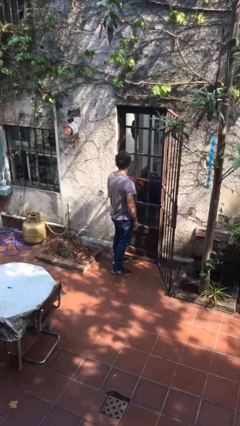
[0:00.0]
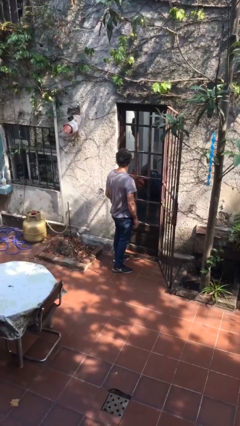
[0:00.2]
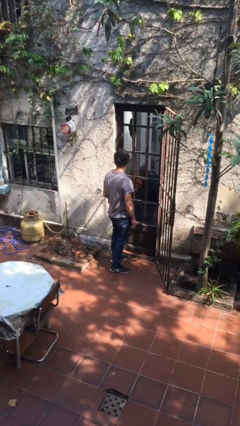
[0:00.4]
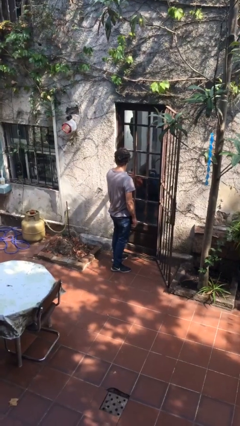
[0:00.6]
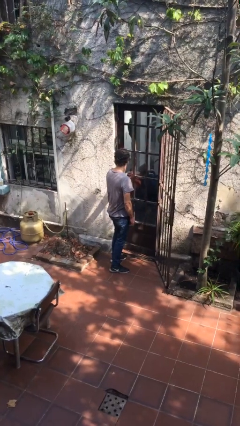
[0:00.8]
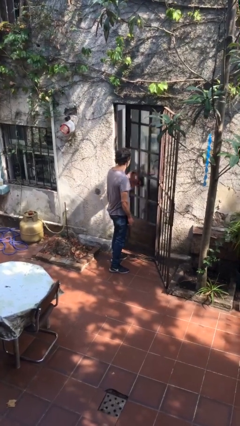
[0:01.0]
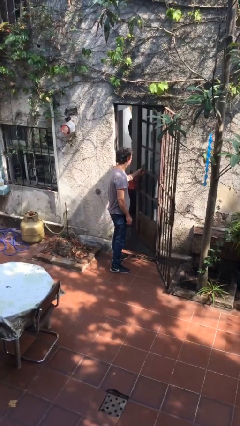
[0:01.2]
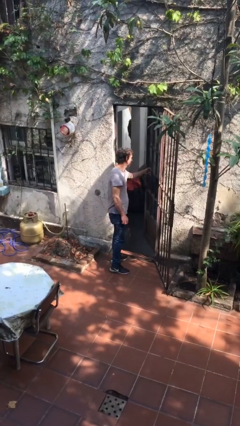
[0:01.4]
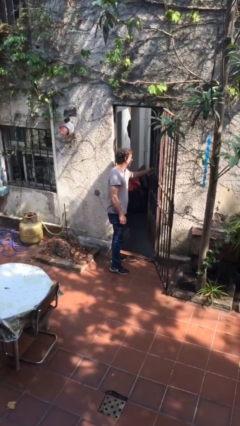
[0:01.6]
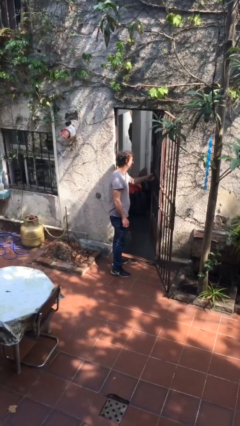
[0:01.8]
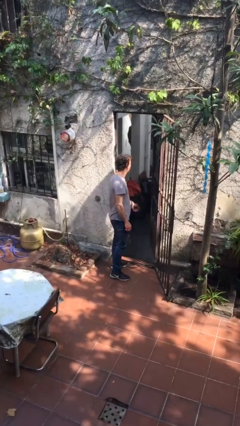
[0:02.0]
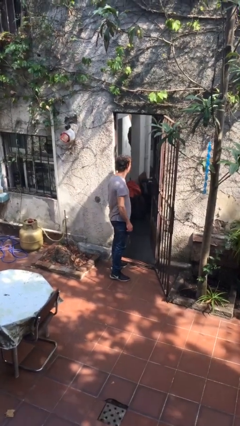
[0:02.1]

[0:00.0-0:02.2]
person opens facility door

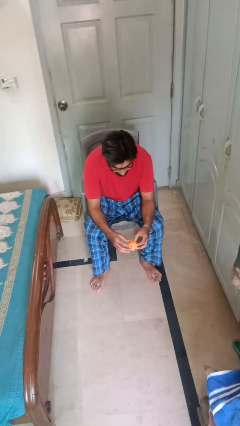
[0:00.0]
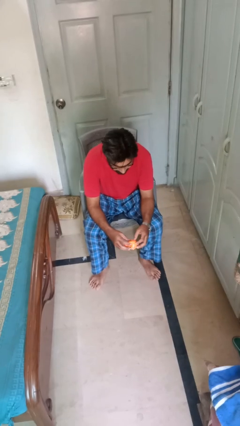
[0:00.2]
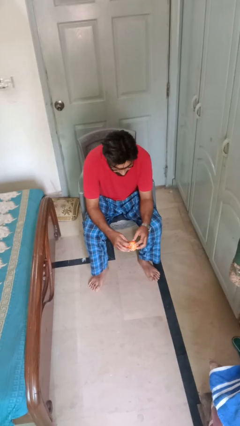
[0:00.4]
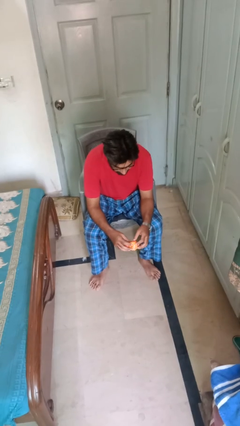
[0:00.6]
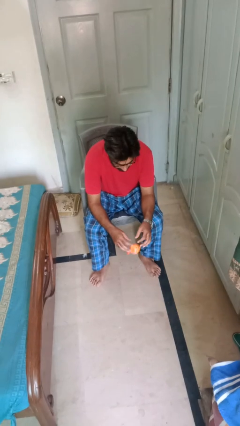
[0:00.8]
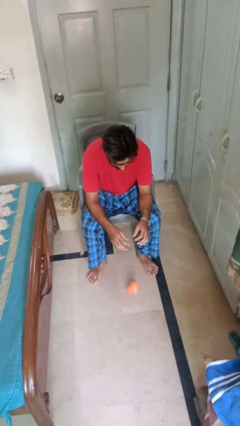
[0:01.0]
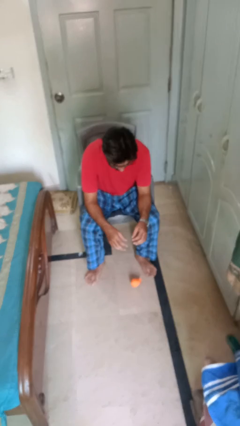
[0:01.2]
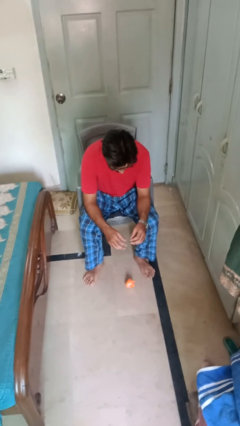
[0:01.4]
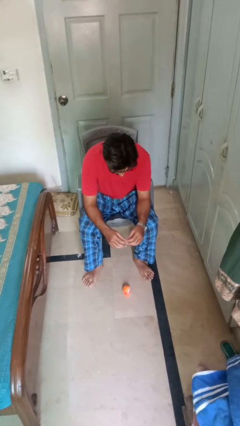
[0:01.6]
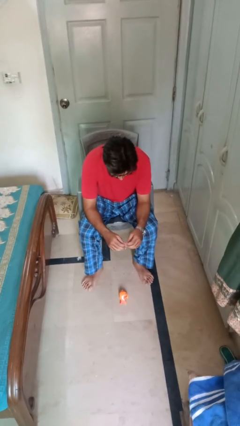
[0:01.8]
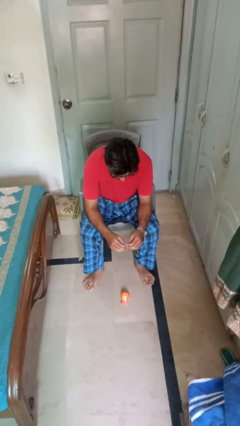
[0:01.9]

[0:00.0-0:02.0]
person drops object

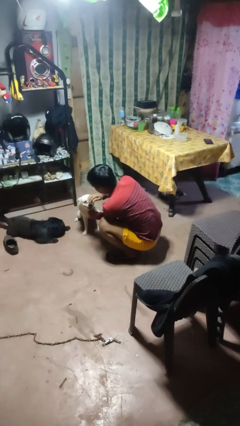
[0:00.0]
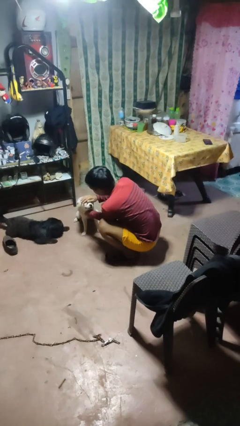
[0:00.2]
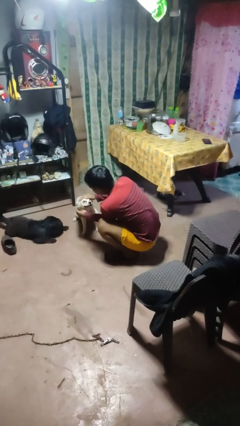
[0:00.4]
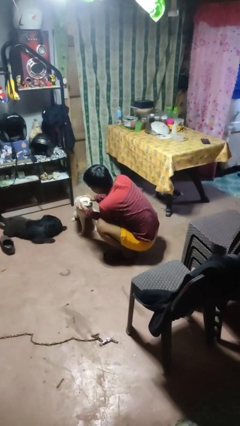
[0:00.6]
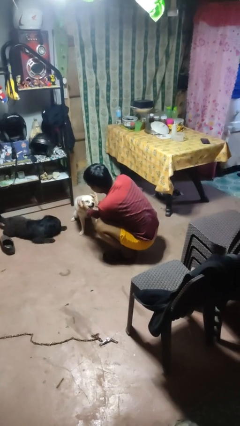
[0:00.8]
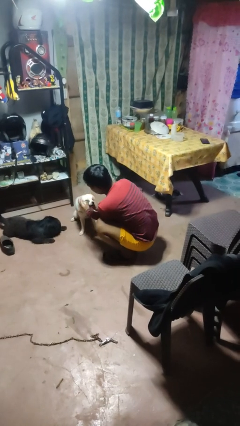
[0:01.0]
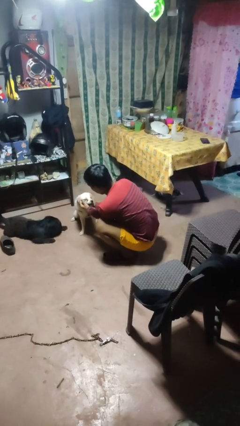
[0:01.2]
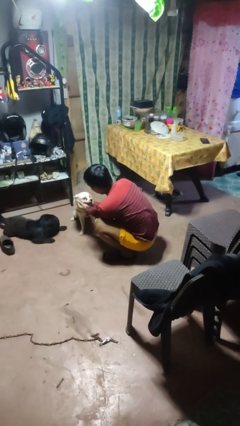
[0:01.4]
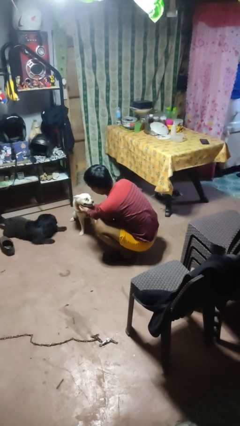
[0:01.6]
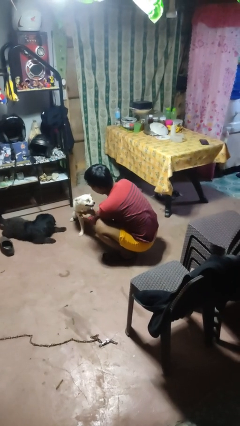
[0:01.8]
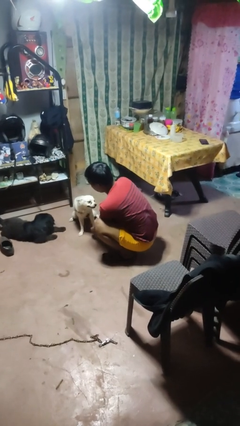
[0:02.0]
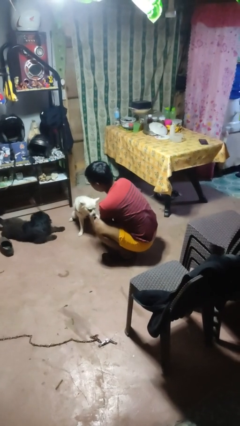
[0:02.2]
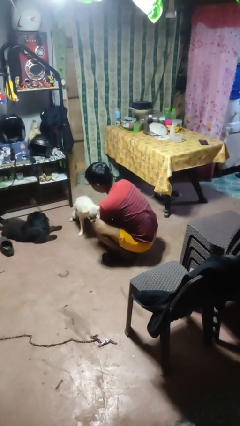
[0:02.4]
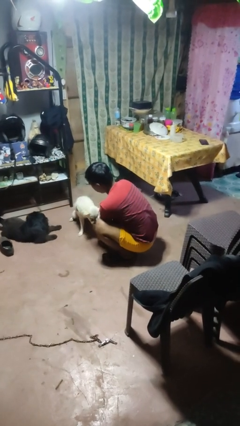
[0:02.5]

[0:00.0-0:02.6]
person pets dog

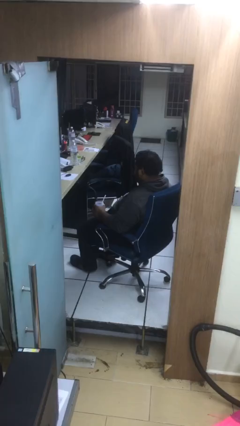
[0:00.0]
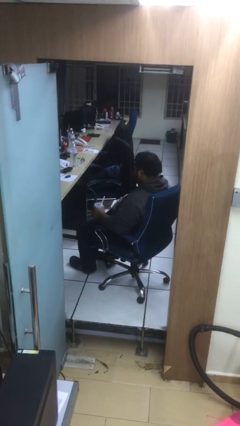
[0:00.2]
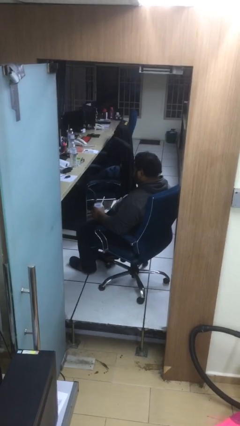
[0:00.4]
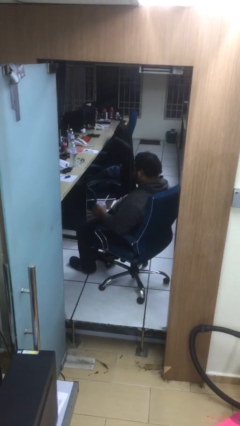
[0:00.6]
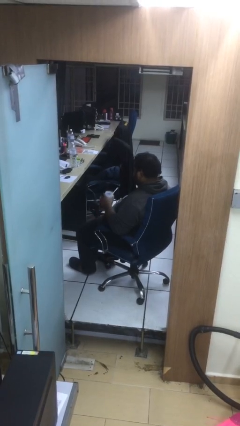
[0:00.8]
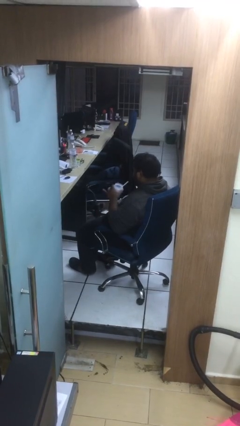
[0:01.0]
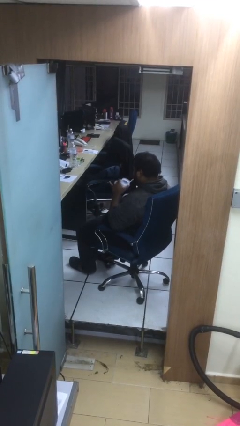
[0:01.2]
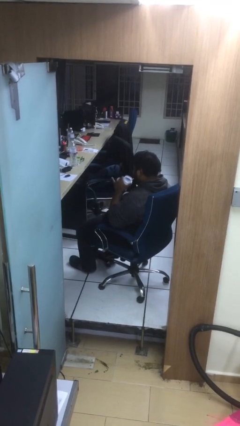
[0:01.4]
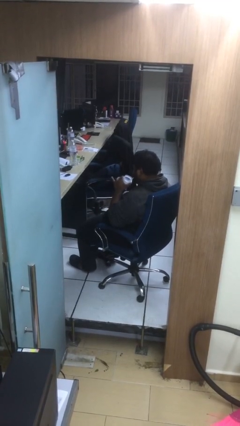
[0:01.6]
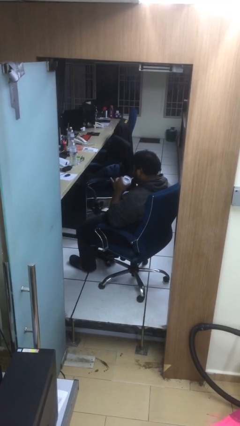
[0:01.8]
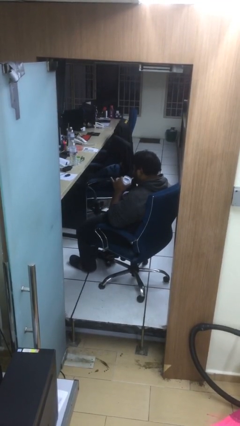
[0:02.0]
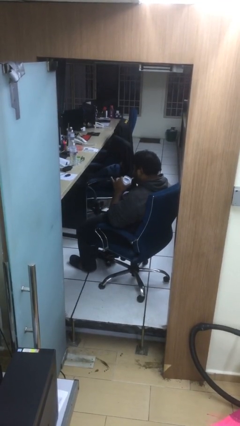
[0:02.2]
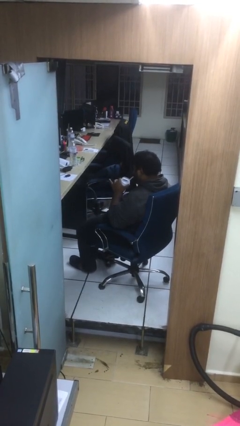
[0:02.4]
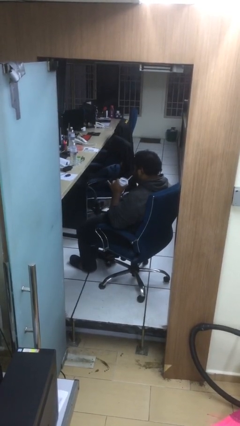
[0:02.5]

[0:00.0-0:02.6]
person drinks from straw

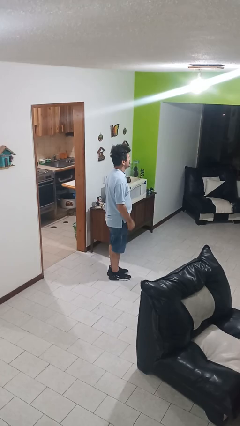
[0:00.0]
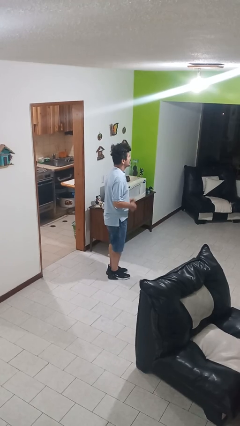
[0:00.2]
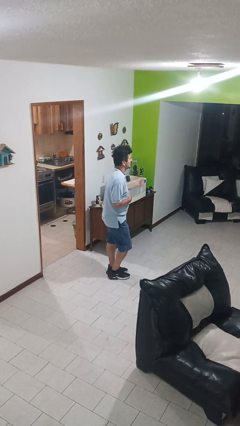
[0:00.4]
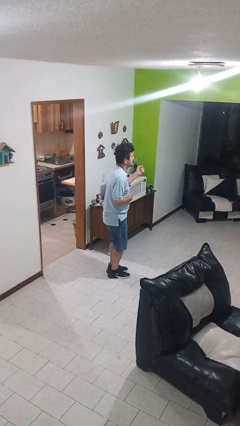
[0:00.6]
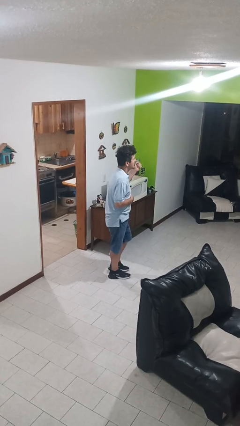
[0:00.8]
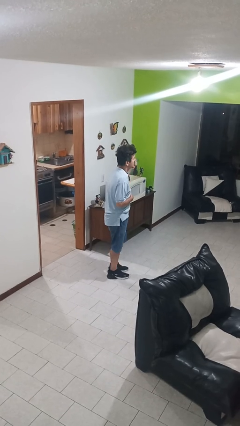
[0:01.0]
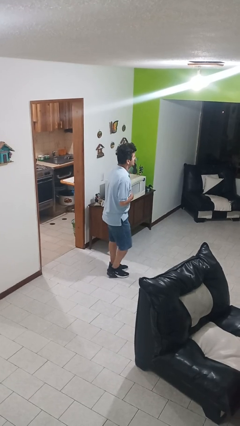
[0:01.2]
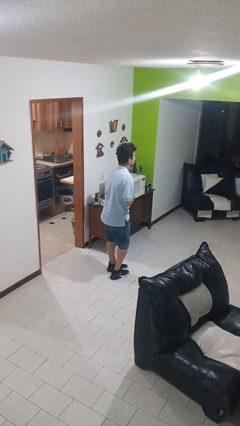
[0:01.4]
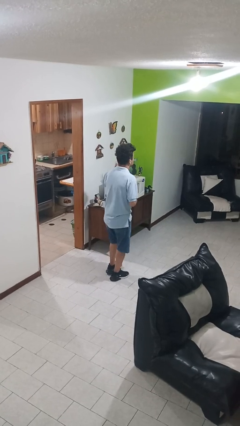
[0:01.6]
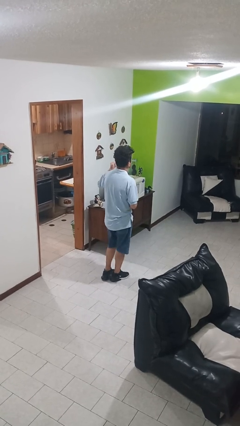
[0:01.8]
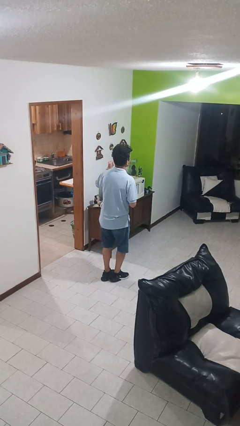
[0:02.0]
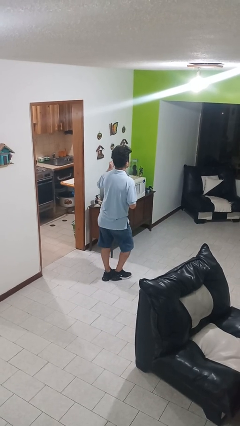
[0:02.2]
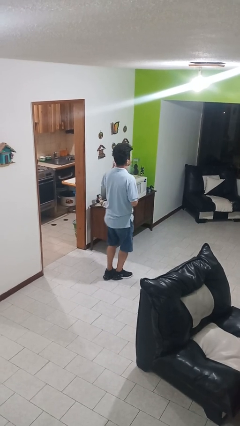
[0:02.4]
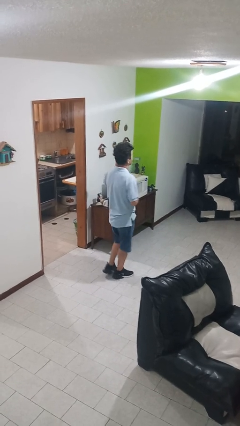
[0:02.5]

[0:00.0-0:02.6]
person dances in place

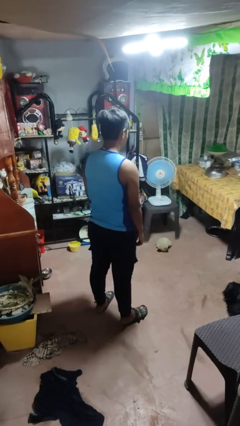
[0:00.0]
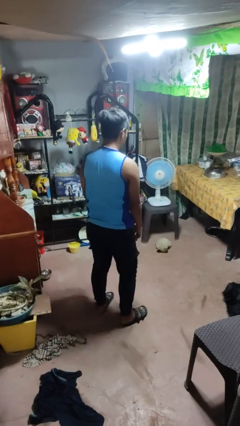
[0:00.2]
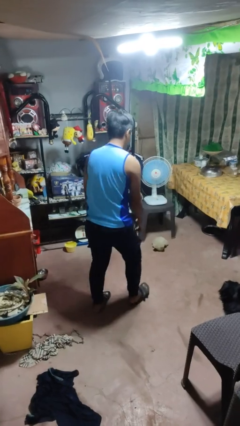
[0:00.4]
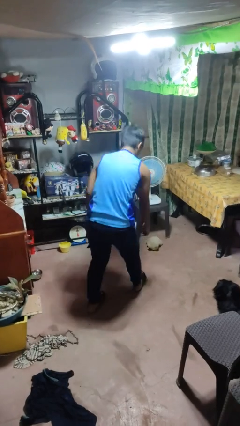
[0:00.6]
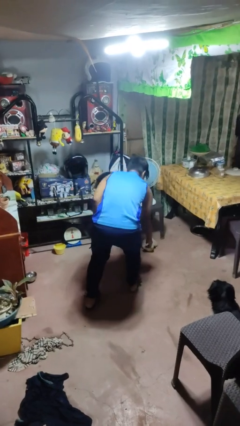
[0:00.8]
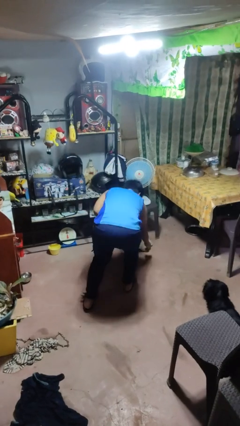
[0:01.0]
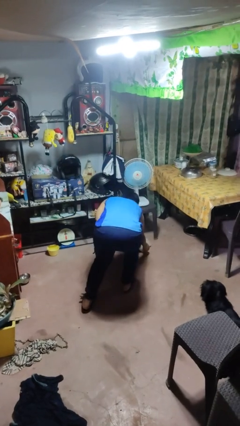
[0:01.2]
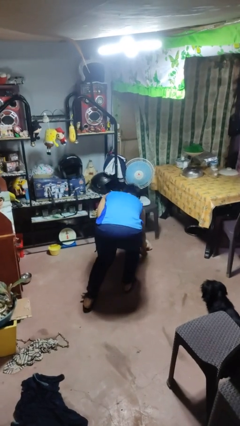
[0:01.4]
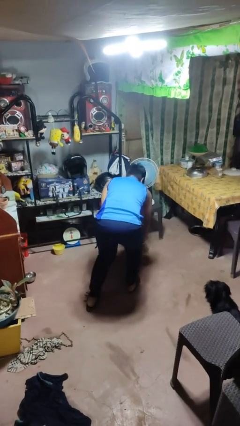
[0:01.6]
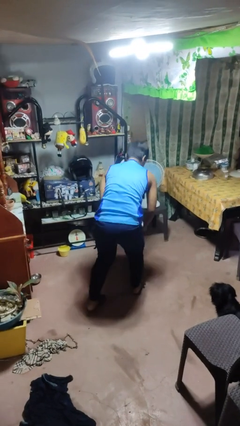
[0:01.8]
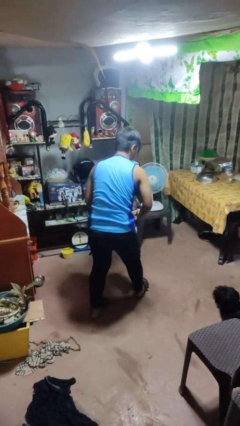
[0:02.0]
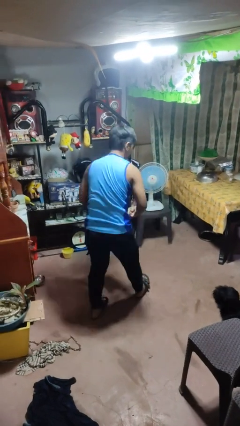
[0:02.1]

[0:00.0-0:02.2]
person picks up object from floor

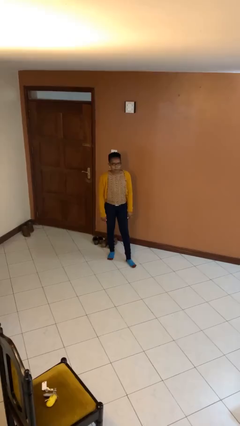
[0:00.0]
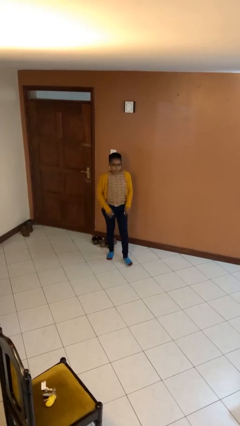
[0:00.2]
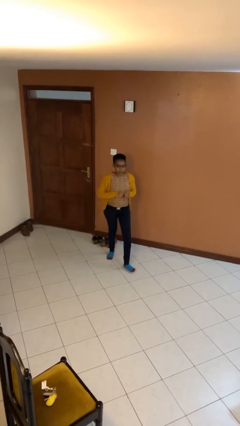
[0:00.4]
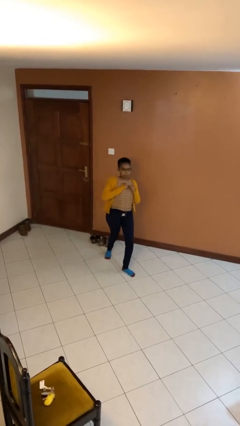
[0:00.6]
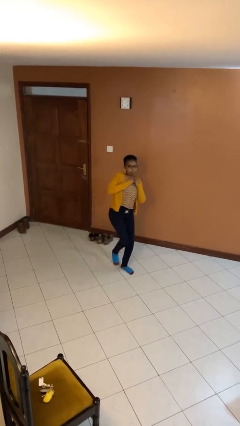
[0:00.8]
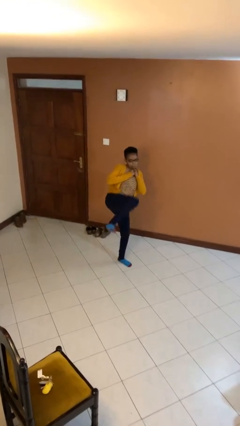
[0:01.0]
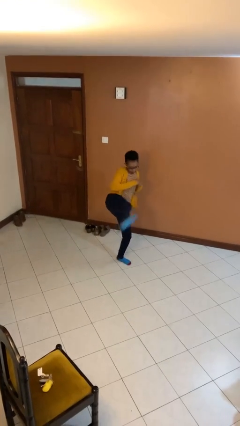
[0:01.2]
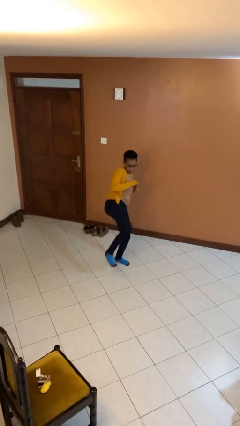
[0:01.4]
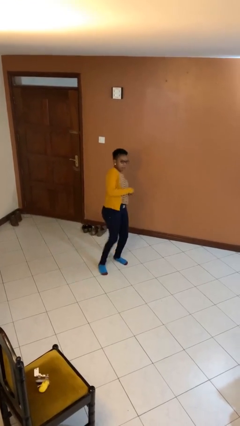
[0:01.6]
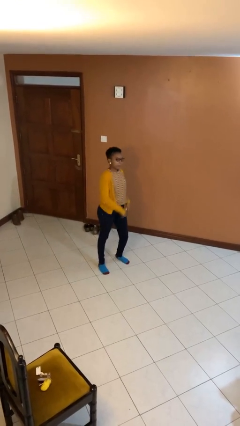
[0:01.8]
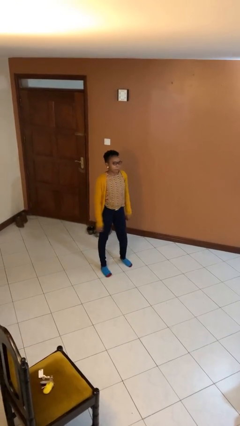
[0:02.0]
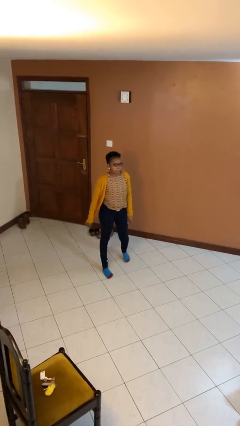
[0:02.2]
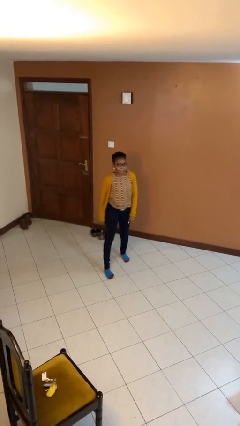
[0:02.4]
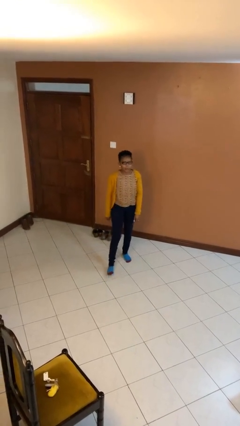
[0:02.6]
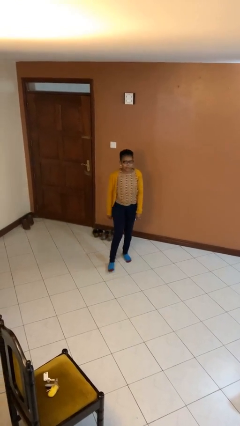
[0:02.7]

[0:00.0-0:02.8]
person karate kicks

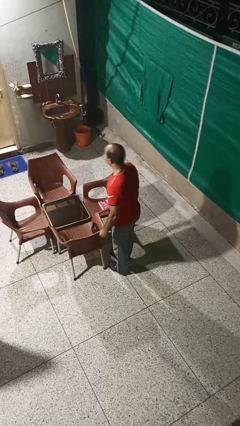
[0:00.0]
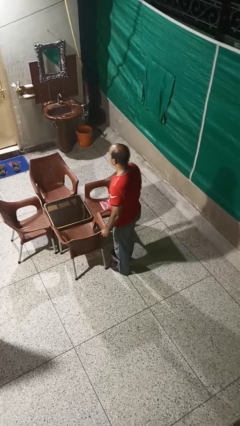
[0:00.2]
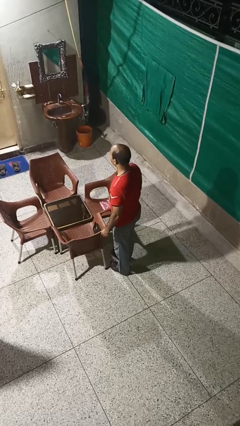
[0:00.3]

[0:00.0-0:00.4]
person pushes in chair
